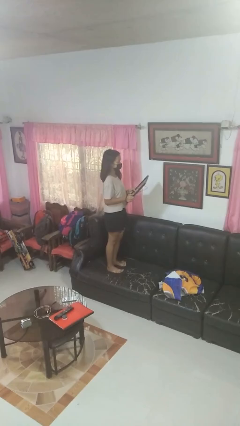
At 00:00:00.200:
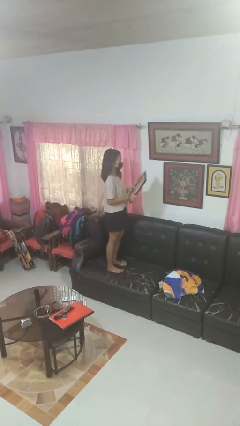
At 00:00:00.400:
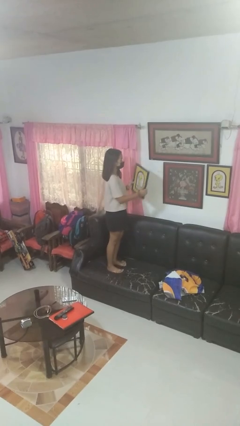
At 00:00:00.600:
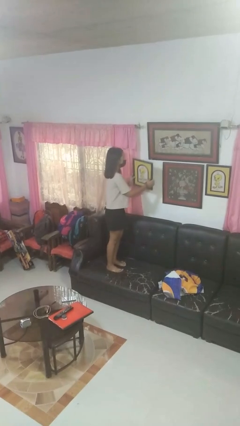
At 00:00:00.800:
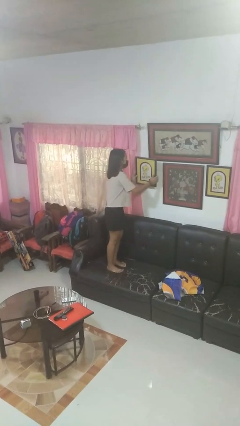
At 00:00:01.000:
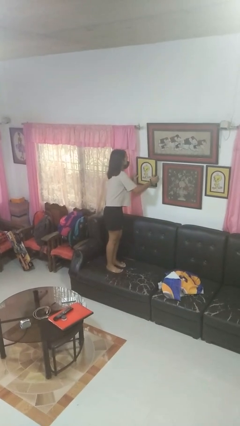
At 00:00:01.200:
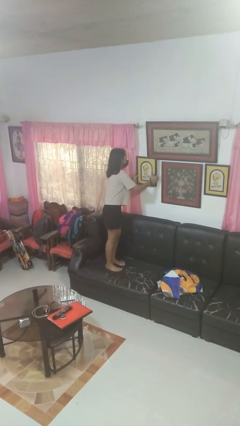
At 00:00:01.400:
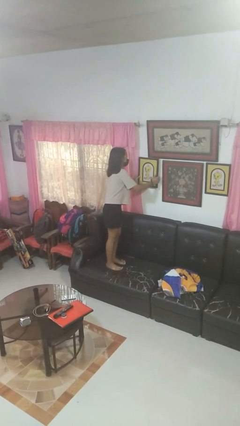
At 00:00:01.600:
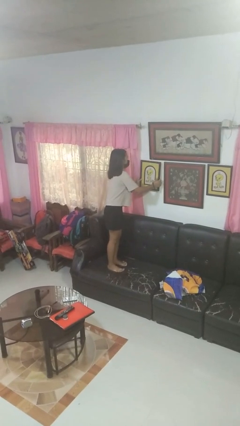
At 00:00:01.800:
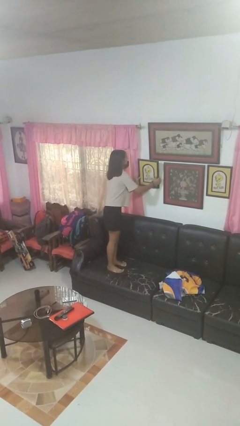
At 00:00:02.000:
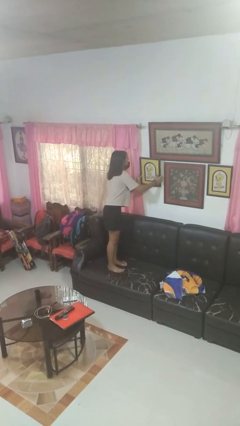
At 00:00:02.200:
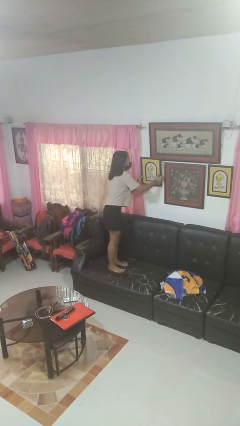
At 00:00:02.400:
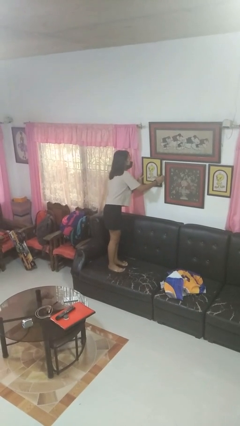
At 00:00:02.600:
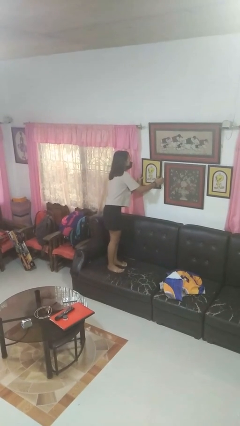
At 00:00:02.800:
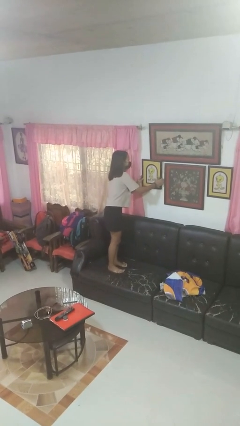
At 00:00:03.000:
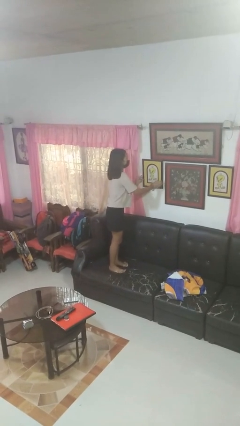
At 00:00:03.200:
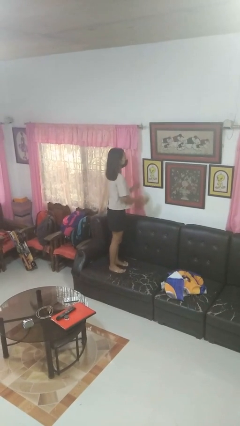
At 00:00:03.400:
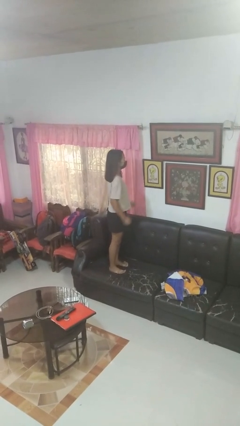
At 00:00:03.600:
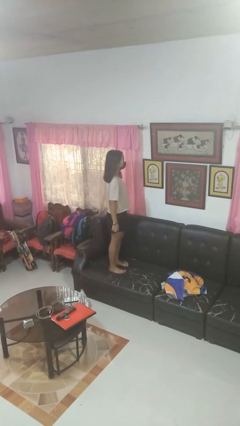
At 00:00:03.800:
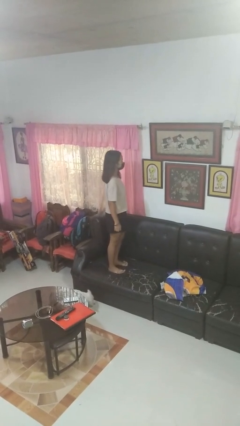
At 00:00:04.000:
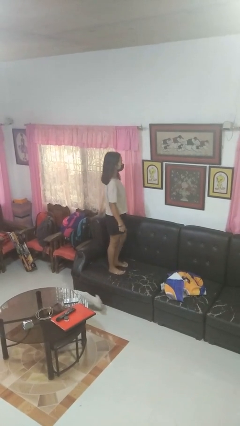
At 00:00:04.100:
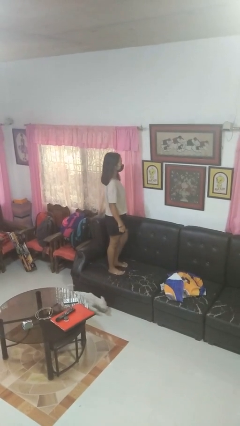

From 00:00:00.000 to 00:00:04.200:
person puts up picture frame

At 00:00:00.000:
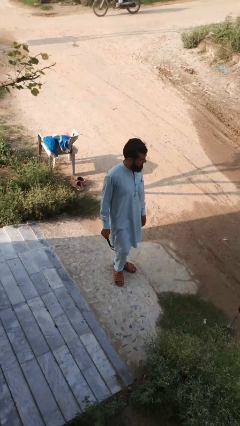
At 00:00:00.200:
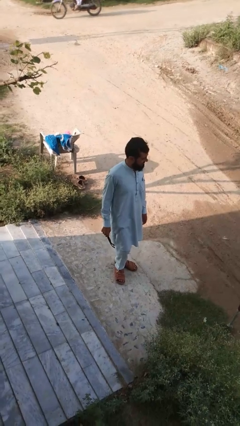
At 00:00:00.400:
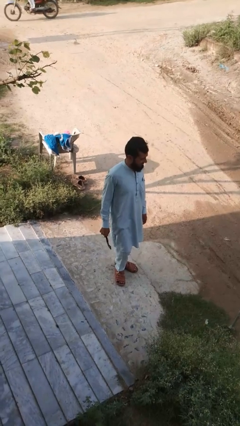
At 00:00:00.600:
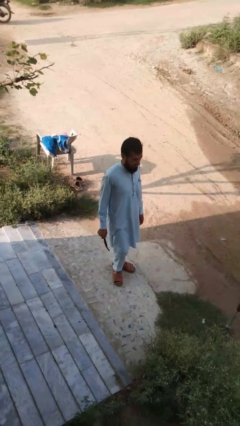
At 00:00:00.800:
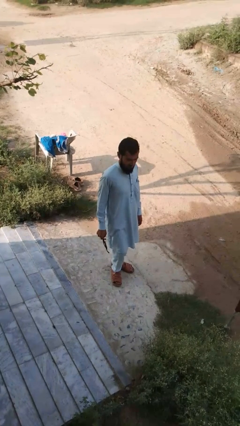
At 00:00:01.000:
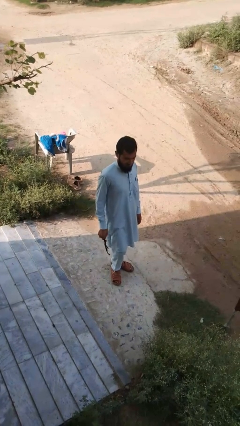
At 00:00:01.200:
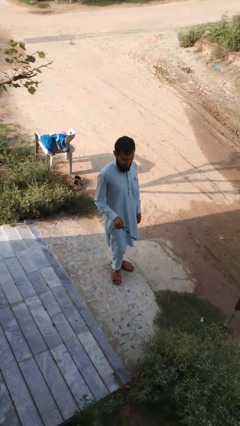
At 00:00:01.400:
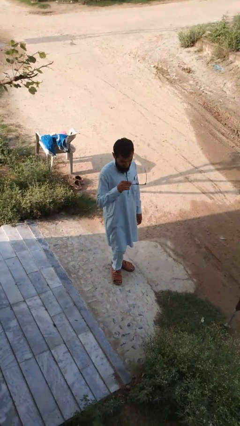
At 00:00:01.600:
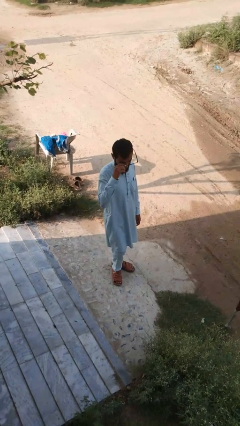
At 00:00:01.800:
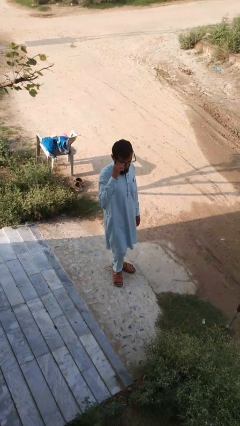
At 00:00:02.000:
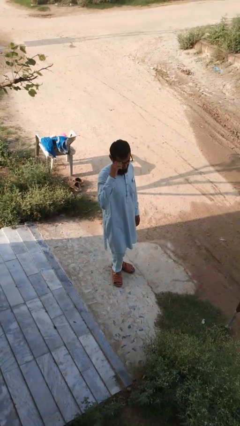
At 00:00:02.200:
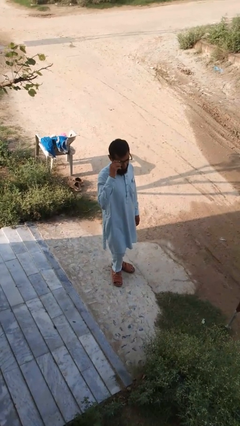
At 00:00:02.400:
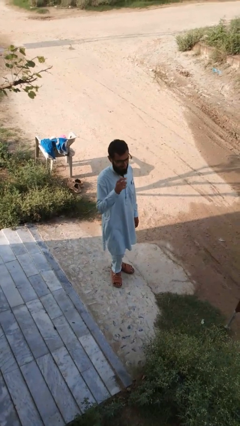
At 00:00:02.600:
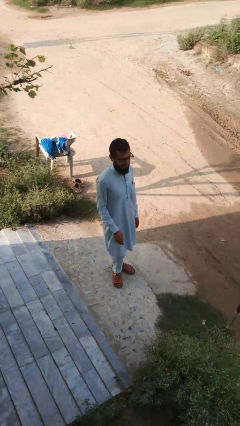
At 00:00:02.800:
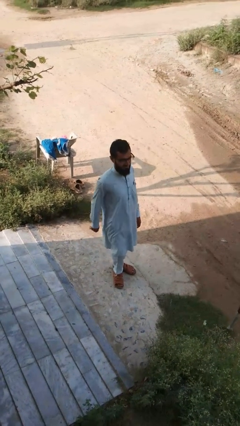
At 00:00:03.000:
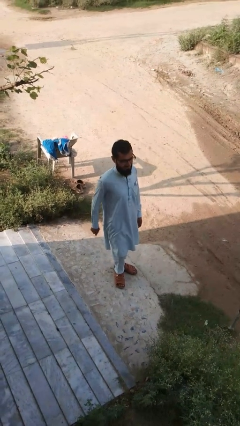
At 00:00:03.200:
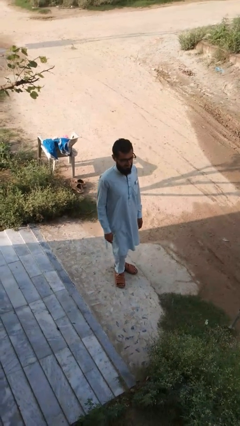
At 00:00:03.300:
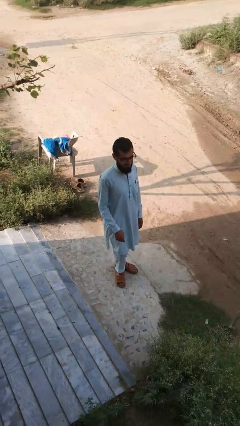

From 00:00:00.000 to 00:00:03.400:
person puts on glasses

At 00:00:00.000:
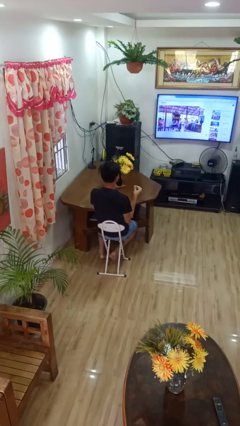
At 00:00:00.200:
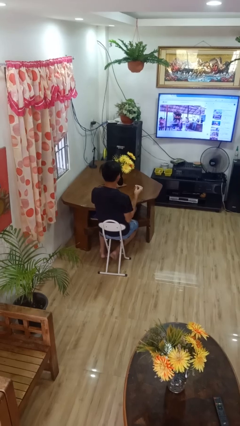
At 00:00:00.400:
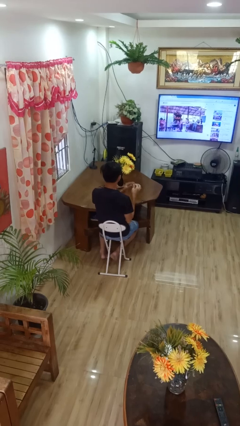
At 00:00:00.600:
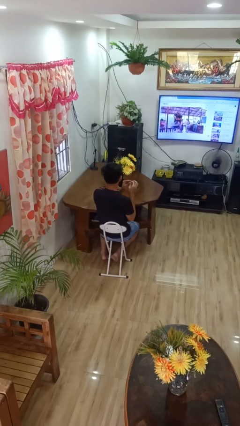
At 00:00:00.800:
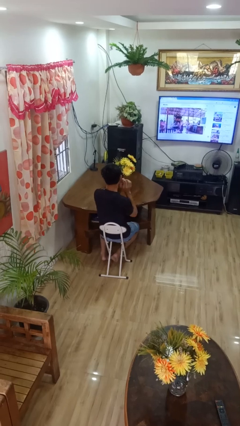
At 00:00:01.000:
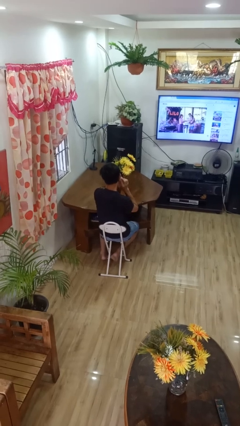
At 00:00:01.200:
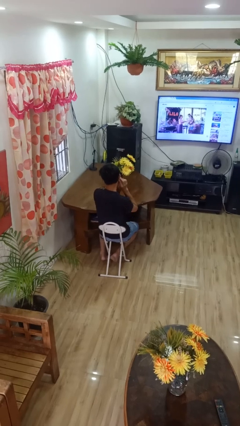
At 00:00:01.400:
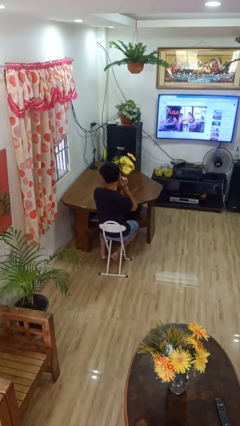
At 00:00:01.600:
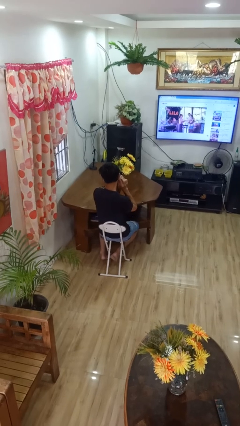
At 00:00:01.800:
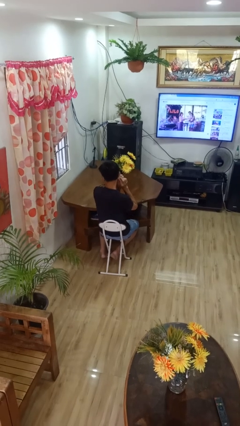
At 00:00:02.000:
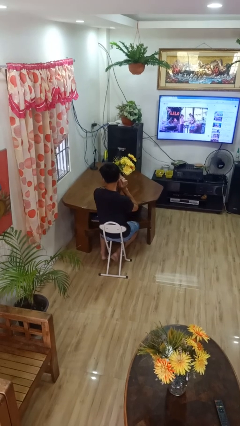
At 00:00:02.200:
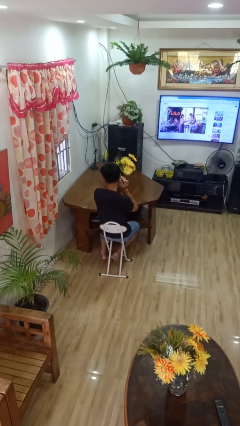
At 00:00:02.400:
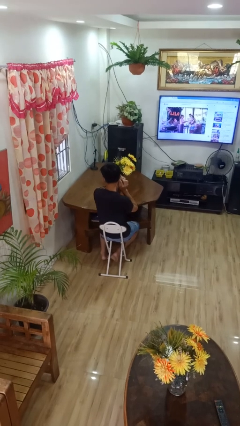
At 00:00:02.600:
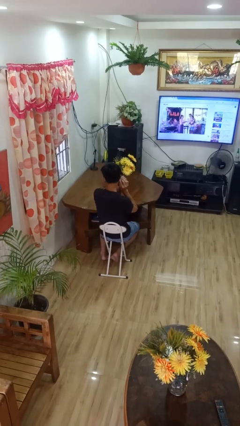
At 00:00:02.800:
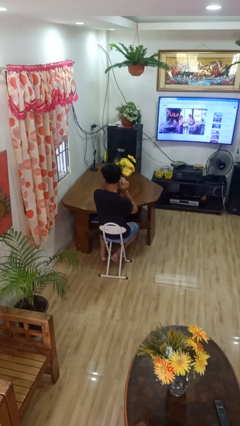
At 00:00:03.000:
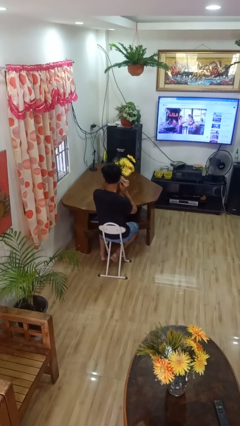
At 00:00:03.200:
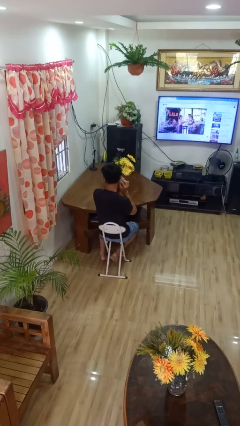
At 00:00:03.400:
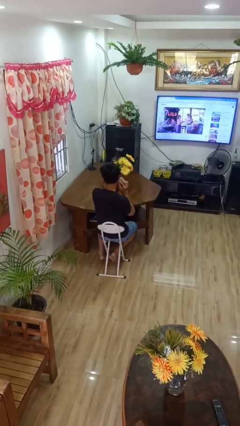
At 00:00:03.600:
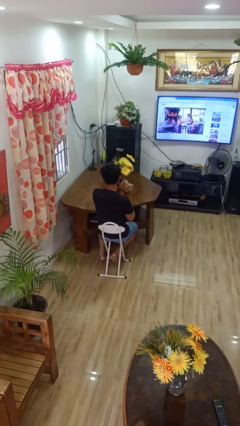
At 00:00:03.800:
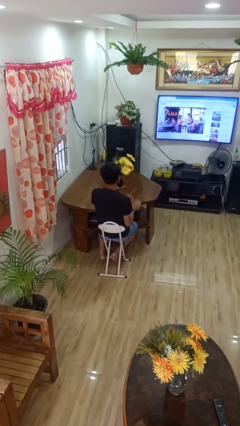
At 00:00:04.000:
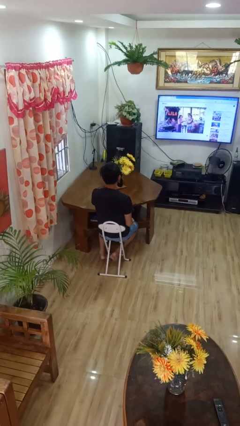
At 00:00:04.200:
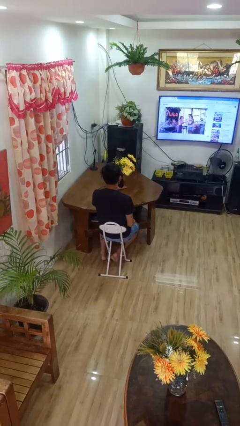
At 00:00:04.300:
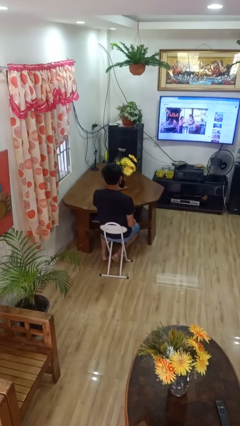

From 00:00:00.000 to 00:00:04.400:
person puts on earrings

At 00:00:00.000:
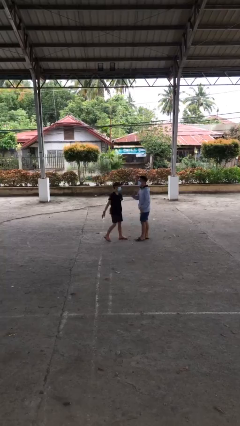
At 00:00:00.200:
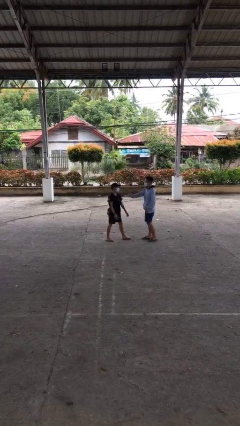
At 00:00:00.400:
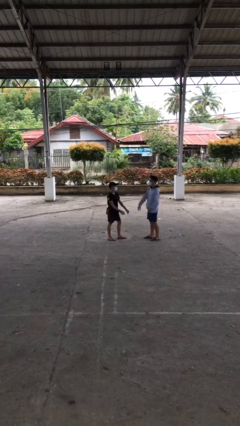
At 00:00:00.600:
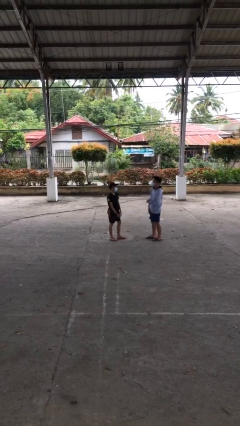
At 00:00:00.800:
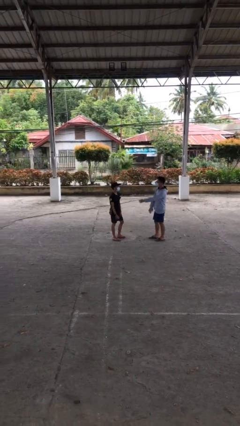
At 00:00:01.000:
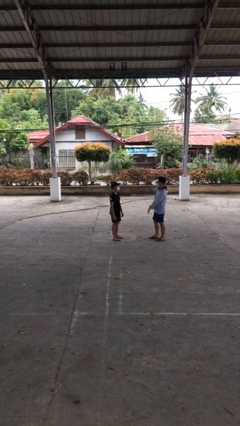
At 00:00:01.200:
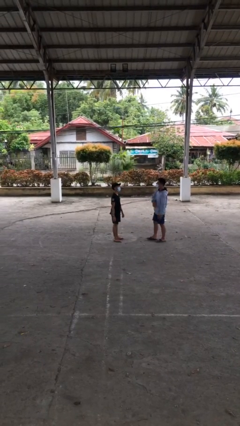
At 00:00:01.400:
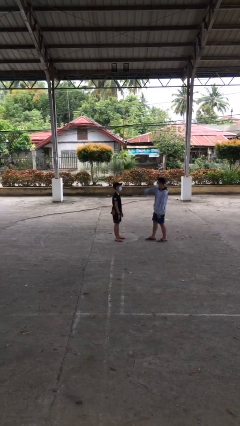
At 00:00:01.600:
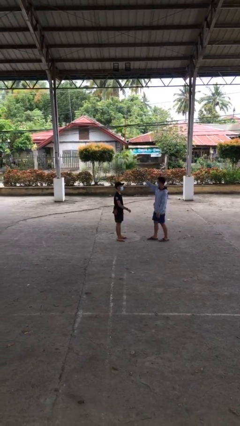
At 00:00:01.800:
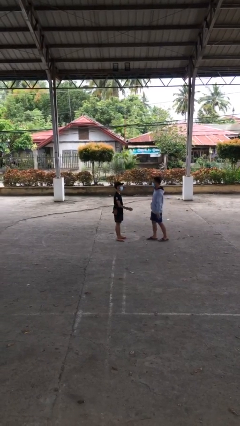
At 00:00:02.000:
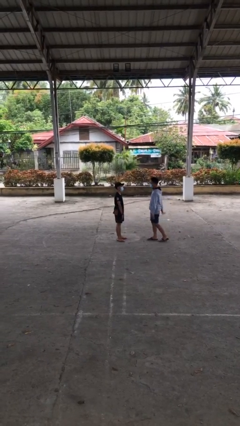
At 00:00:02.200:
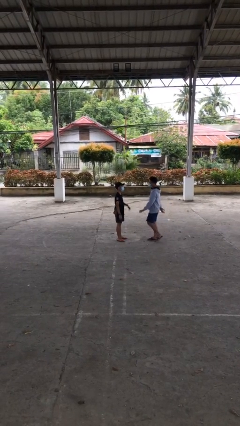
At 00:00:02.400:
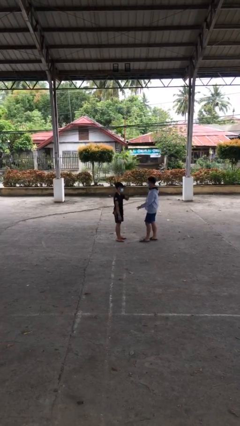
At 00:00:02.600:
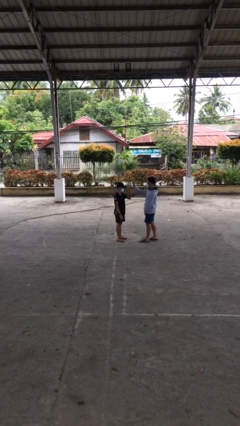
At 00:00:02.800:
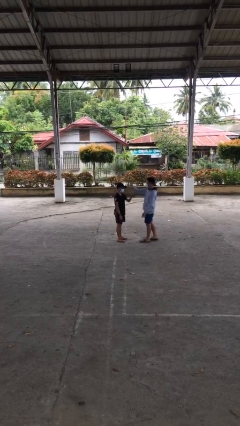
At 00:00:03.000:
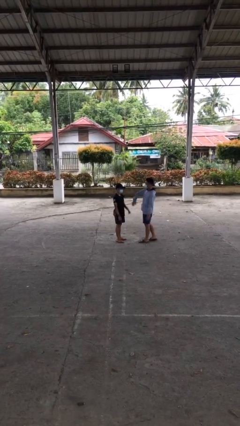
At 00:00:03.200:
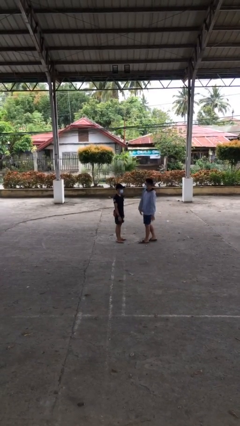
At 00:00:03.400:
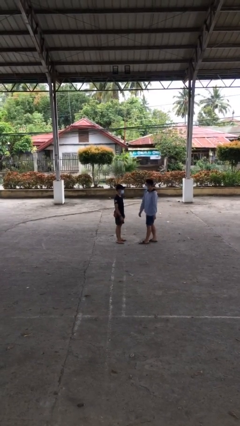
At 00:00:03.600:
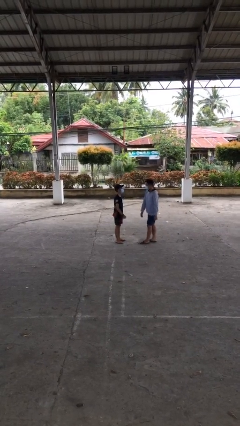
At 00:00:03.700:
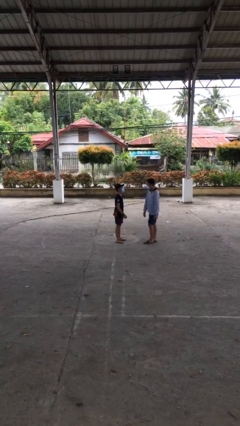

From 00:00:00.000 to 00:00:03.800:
person talks to person

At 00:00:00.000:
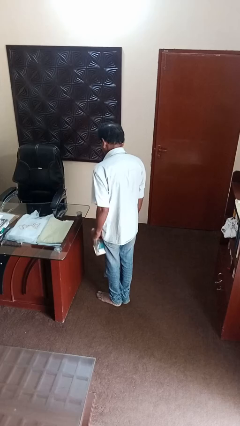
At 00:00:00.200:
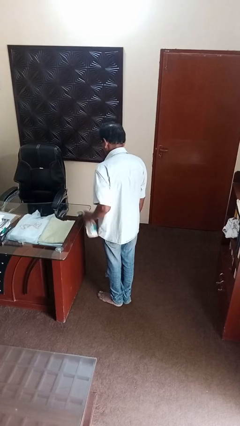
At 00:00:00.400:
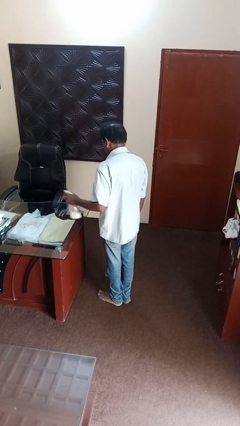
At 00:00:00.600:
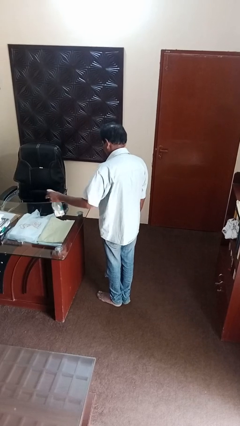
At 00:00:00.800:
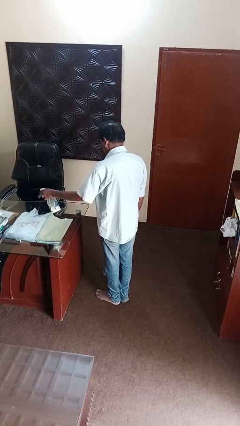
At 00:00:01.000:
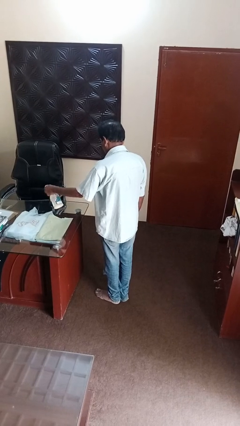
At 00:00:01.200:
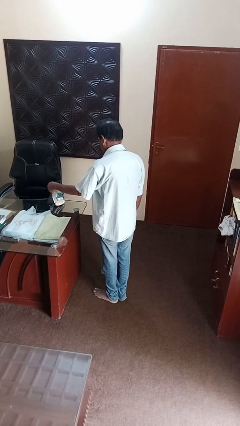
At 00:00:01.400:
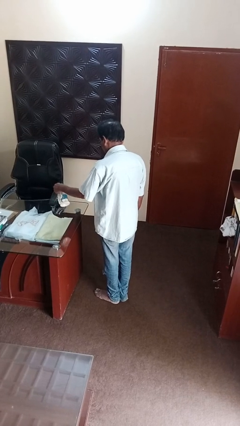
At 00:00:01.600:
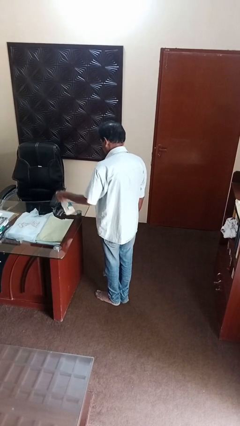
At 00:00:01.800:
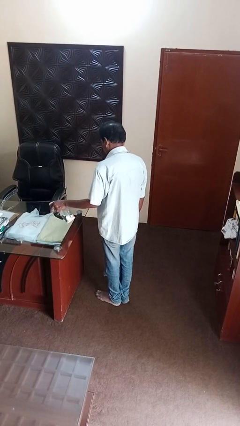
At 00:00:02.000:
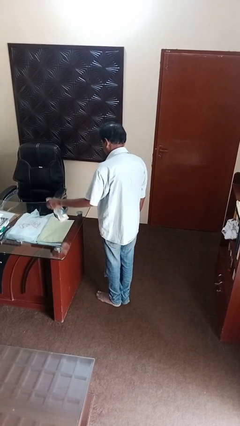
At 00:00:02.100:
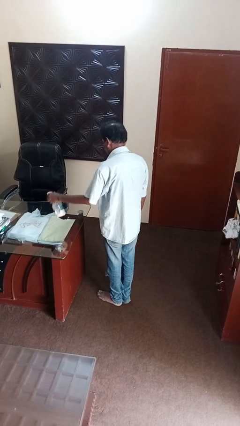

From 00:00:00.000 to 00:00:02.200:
person sprays from bottle
